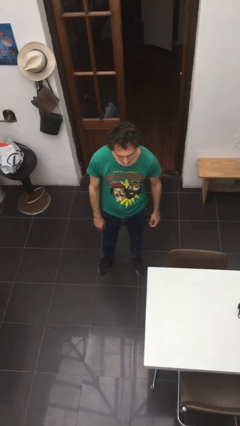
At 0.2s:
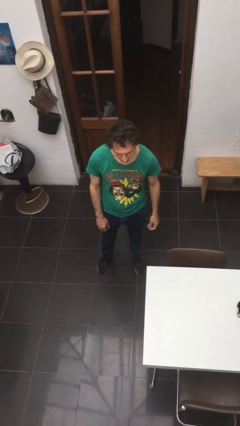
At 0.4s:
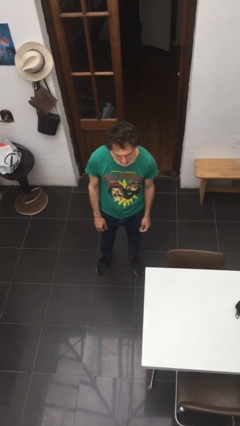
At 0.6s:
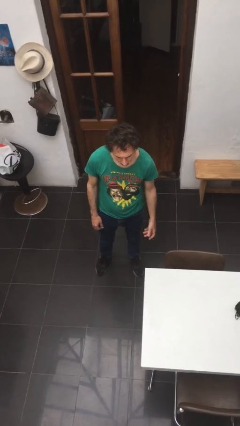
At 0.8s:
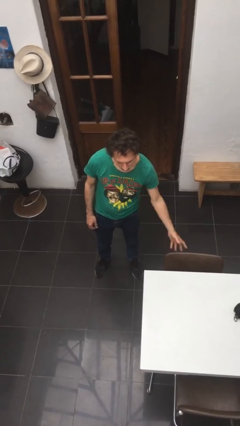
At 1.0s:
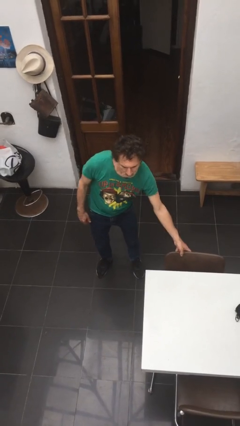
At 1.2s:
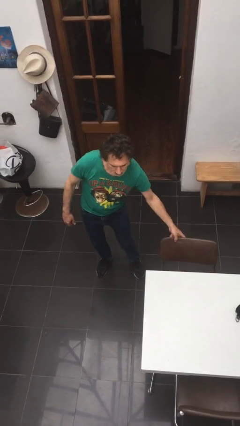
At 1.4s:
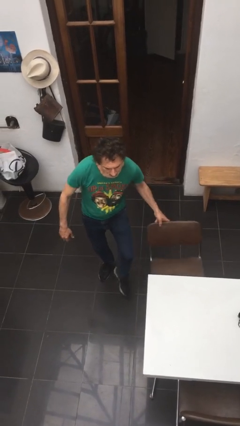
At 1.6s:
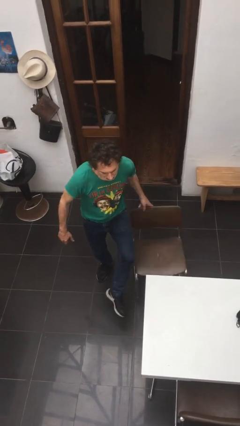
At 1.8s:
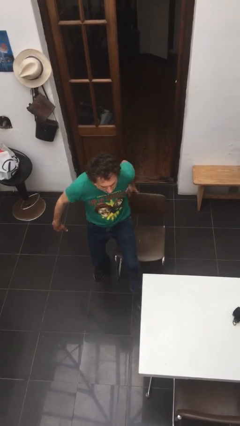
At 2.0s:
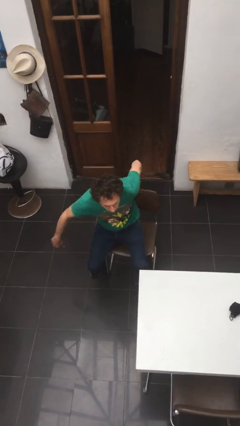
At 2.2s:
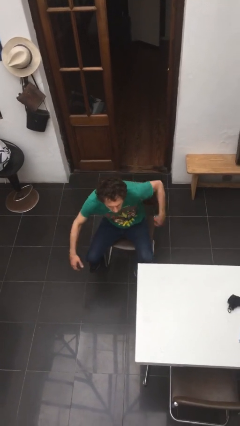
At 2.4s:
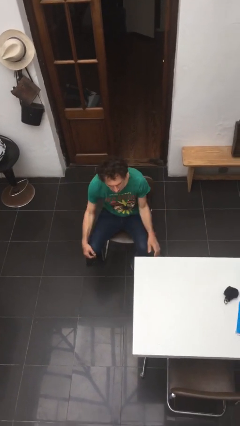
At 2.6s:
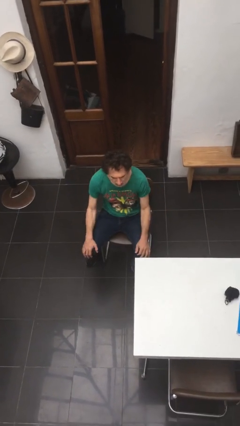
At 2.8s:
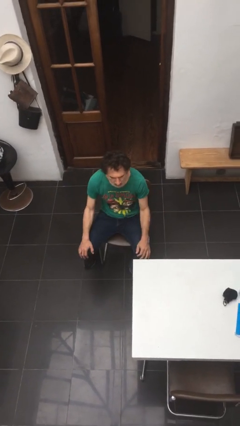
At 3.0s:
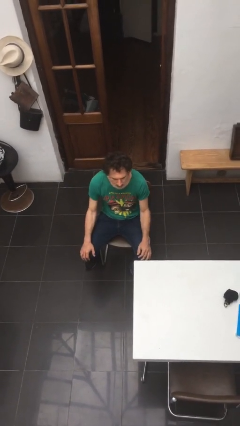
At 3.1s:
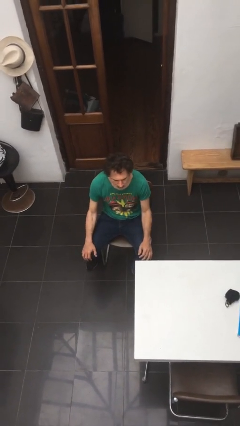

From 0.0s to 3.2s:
person sits down

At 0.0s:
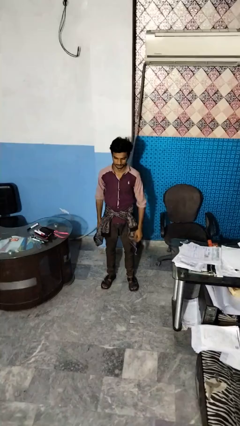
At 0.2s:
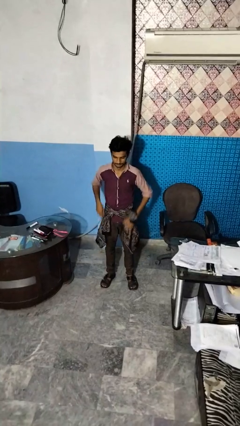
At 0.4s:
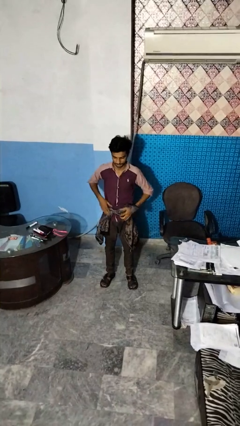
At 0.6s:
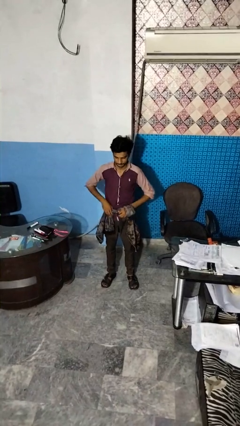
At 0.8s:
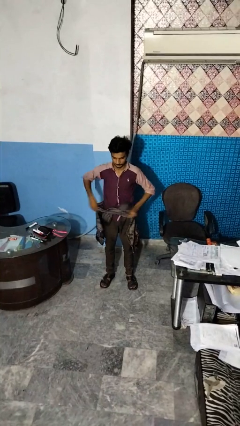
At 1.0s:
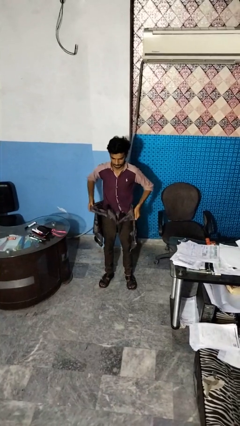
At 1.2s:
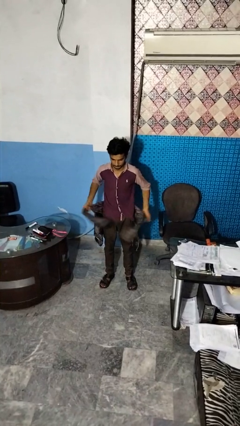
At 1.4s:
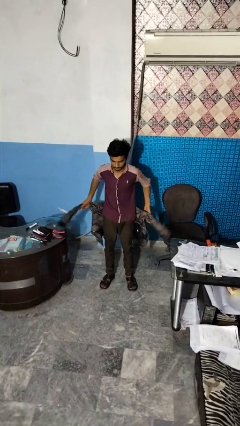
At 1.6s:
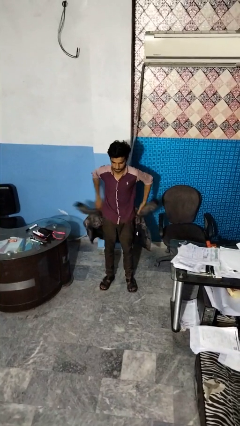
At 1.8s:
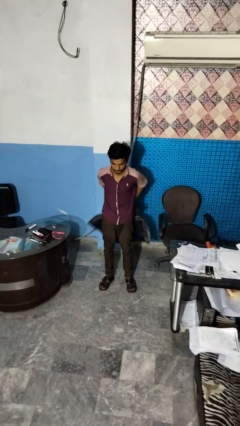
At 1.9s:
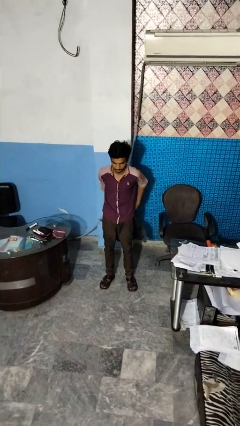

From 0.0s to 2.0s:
person unties jacket around waist

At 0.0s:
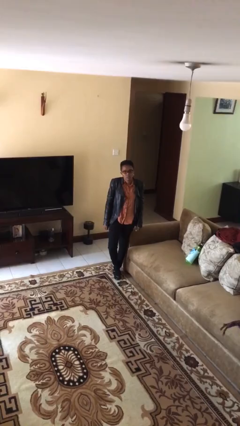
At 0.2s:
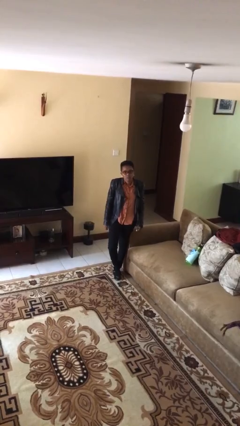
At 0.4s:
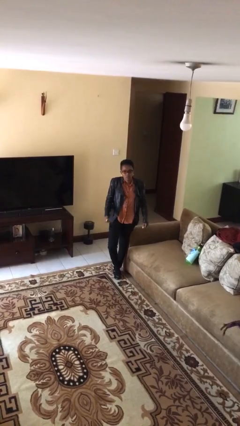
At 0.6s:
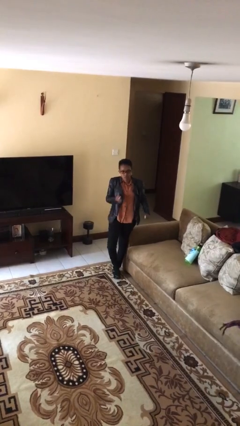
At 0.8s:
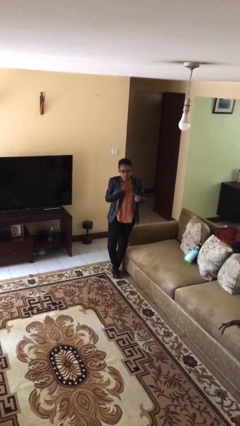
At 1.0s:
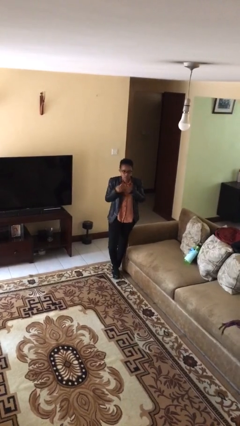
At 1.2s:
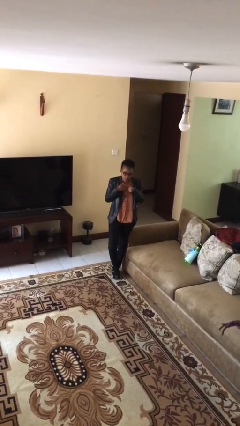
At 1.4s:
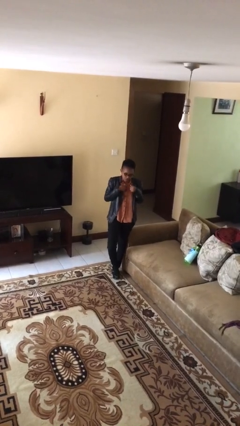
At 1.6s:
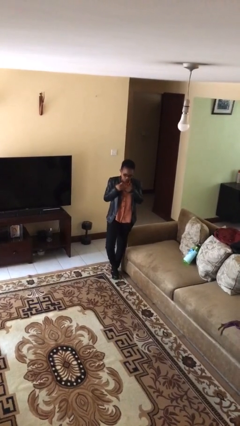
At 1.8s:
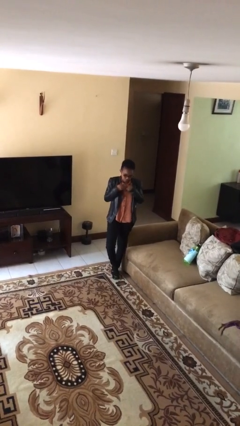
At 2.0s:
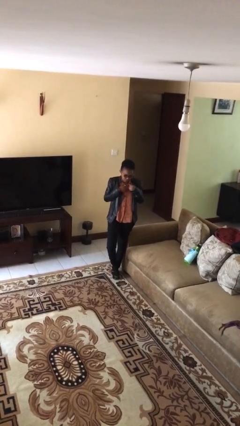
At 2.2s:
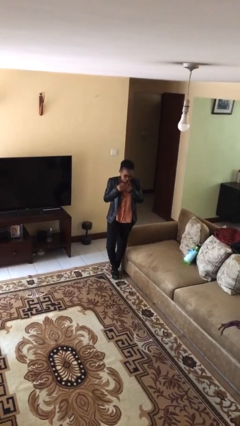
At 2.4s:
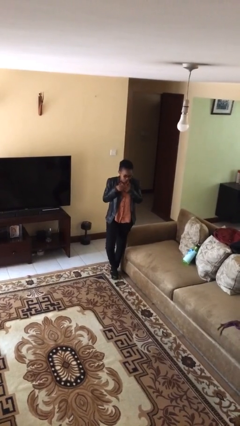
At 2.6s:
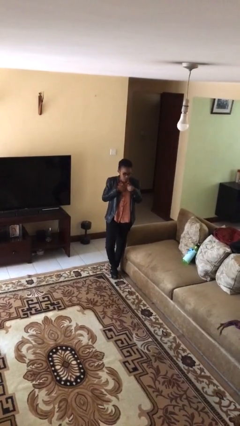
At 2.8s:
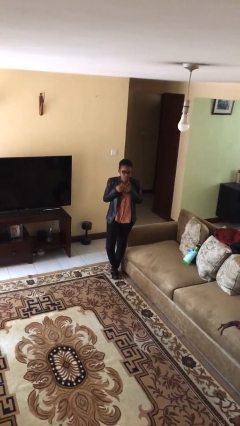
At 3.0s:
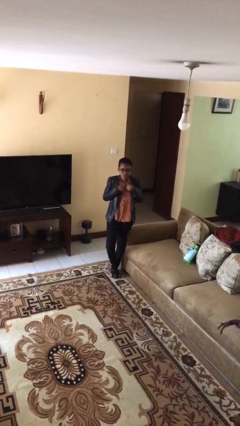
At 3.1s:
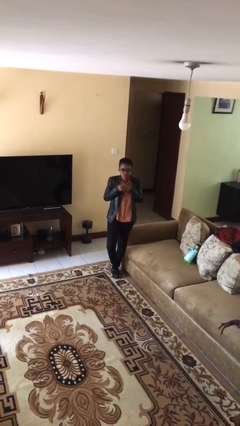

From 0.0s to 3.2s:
person drums on chest

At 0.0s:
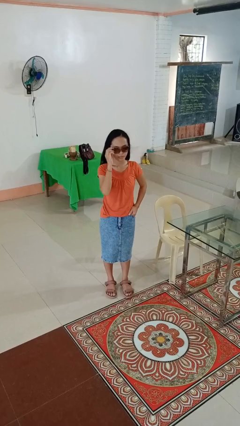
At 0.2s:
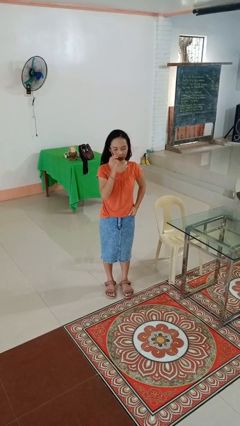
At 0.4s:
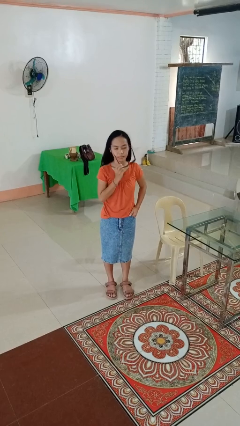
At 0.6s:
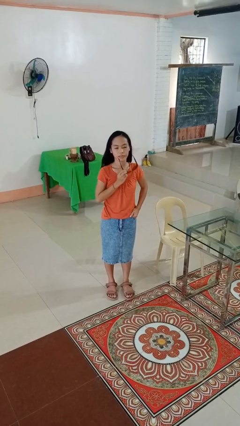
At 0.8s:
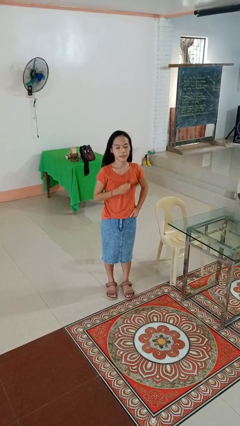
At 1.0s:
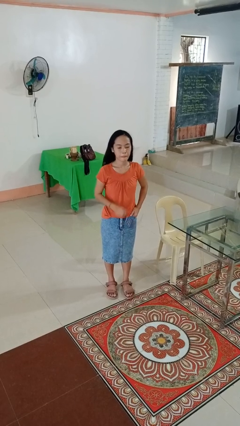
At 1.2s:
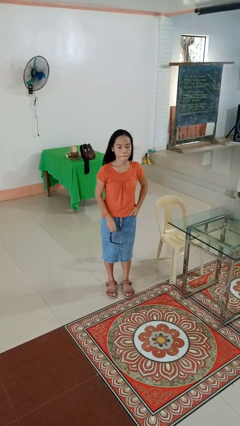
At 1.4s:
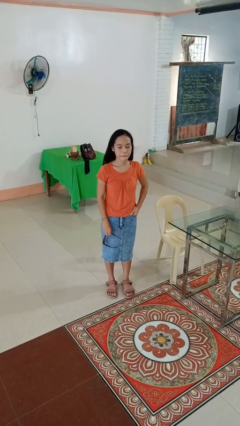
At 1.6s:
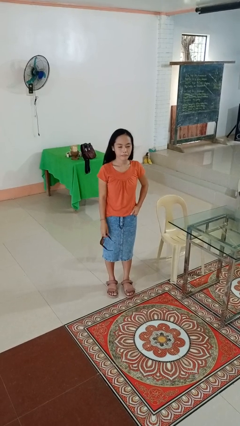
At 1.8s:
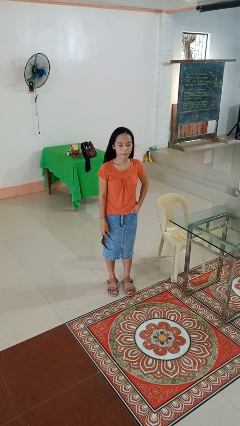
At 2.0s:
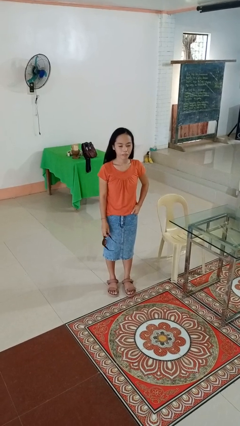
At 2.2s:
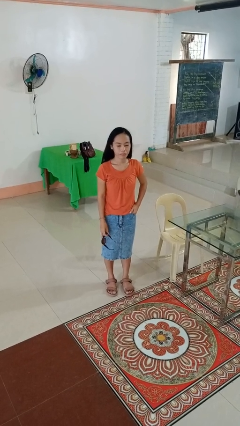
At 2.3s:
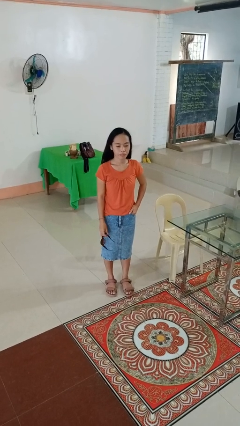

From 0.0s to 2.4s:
person takes off sunglasses

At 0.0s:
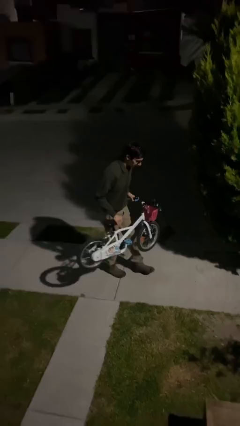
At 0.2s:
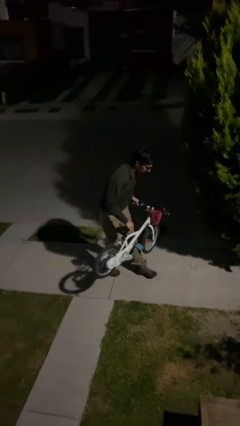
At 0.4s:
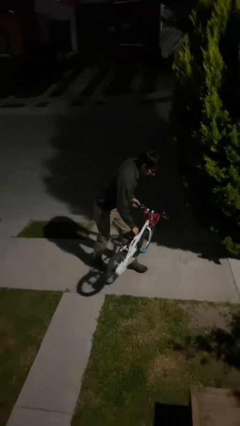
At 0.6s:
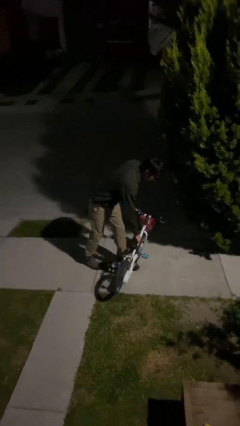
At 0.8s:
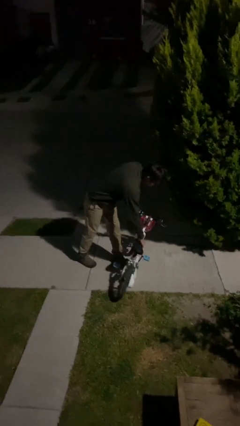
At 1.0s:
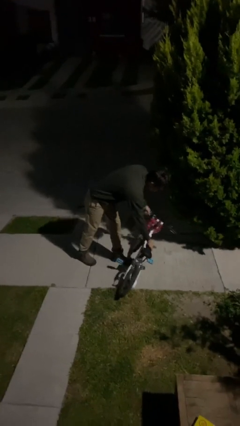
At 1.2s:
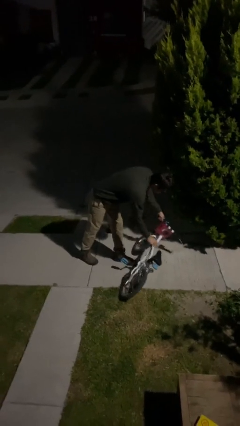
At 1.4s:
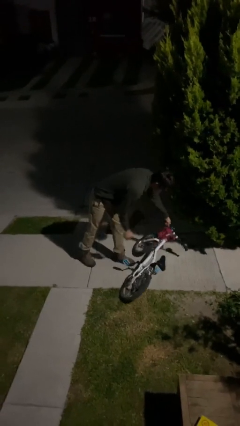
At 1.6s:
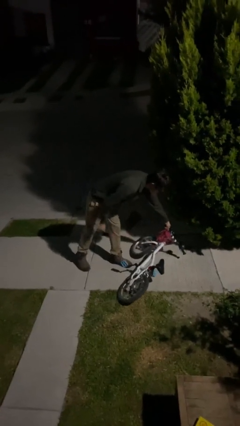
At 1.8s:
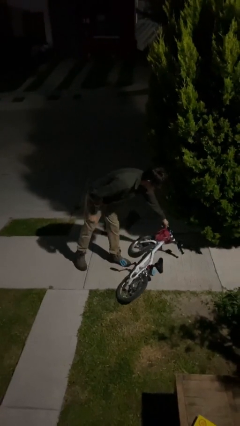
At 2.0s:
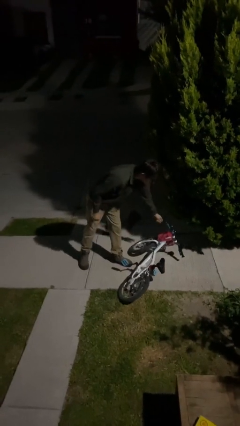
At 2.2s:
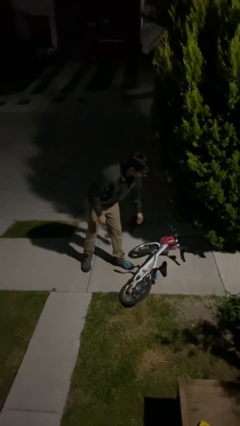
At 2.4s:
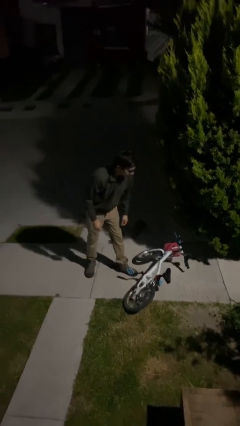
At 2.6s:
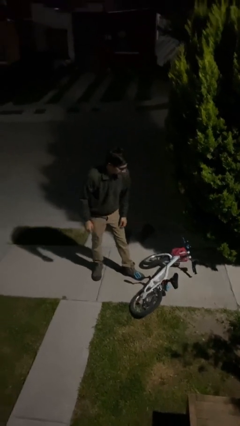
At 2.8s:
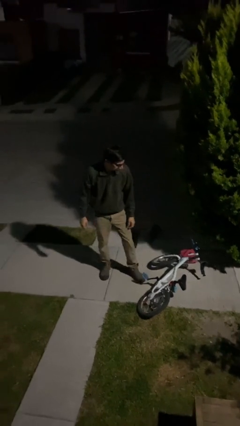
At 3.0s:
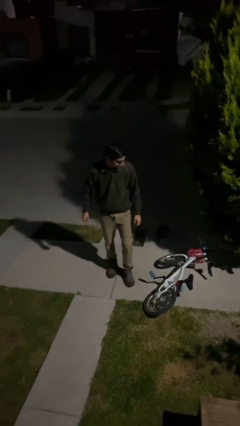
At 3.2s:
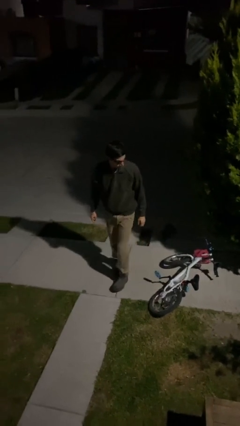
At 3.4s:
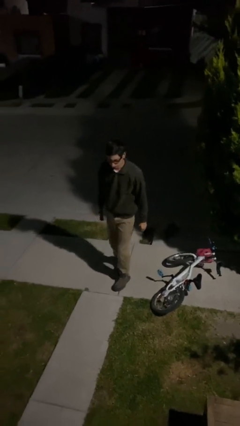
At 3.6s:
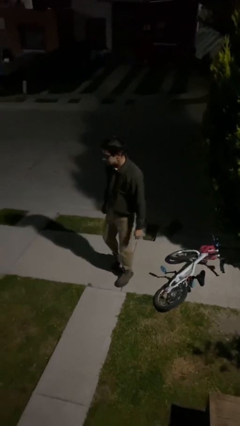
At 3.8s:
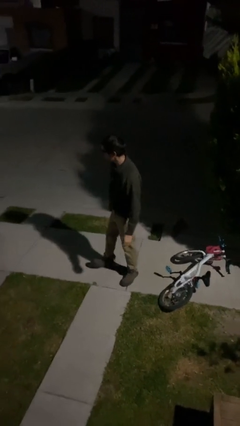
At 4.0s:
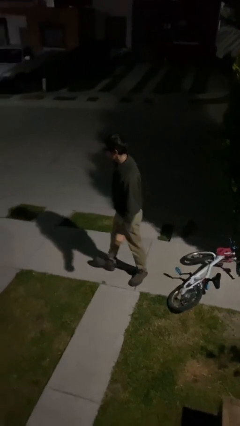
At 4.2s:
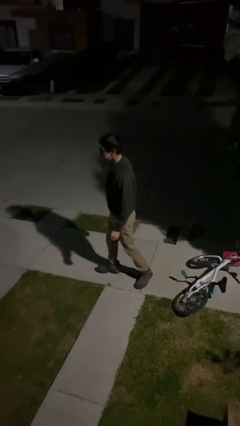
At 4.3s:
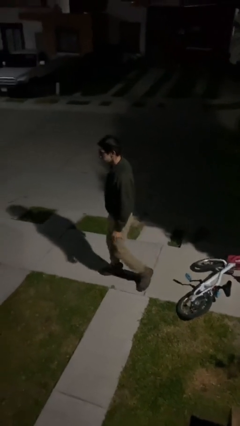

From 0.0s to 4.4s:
person puts down object on floor

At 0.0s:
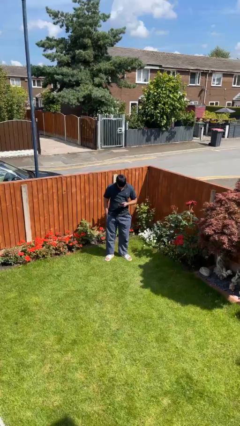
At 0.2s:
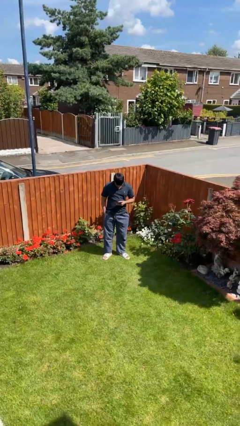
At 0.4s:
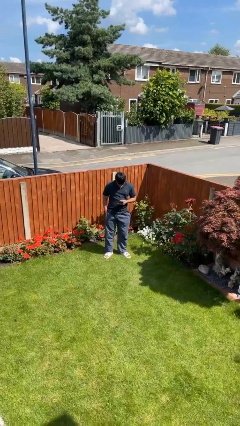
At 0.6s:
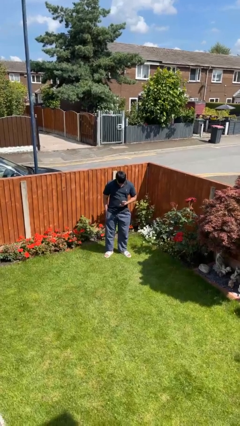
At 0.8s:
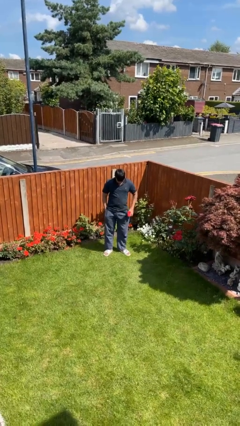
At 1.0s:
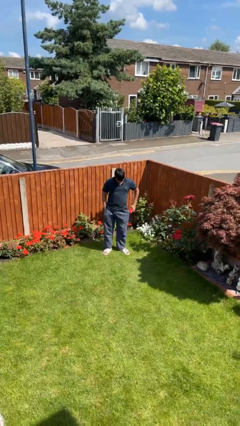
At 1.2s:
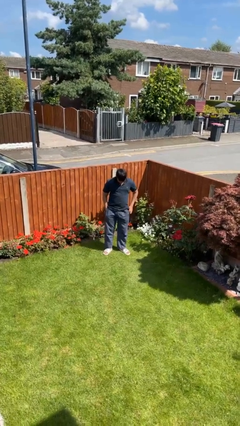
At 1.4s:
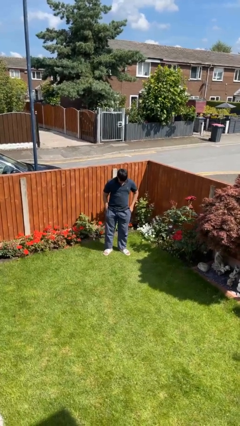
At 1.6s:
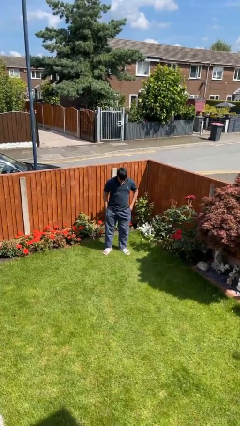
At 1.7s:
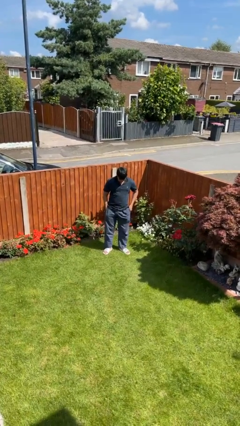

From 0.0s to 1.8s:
person puts phone into pocket

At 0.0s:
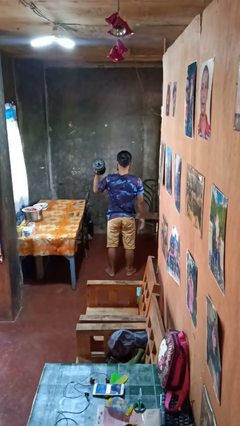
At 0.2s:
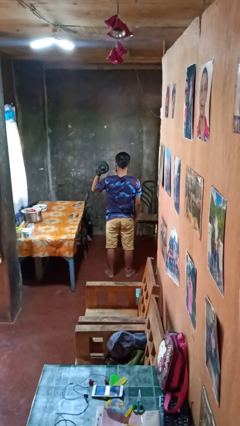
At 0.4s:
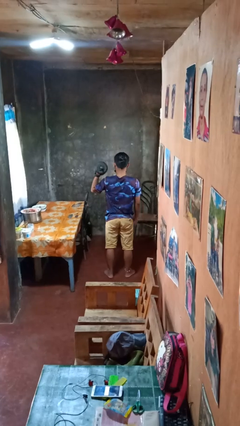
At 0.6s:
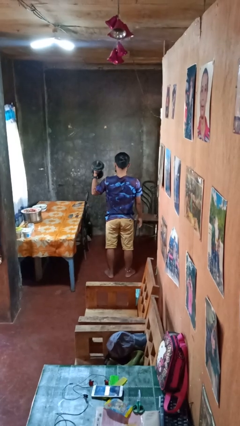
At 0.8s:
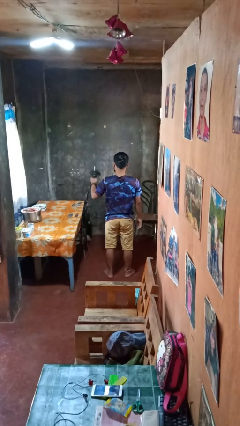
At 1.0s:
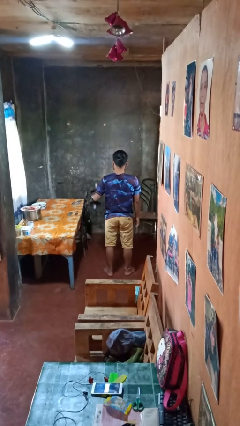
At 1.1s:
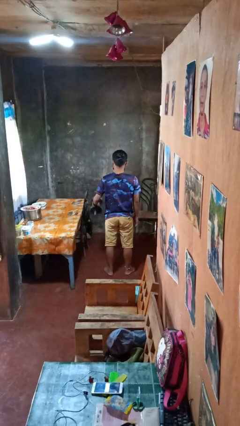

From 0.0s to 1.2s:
person lifts dumbbells
